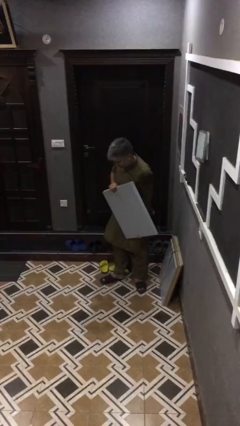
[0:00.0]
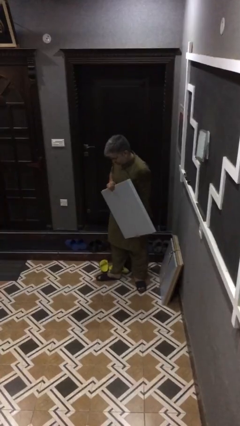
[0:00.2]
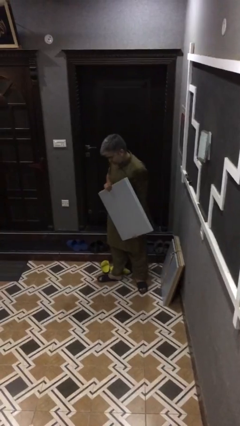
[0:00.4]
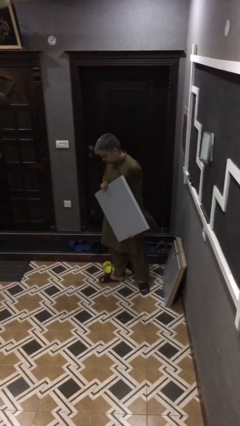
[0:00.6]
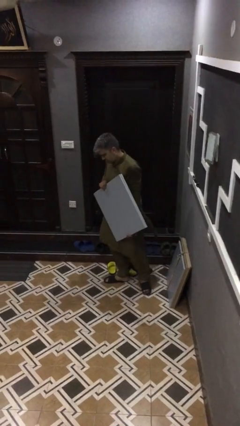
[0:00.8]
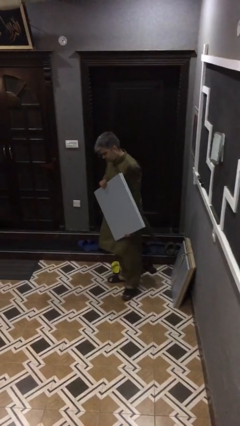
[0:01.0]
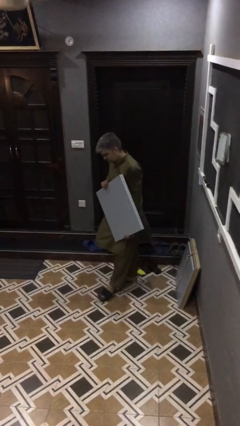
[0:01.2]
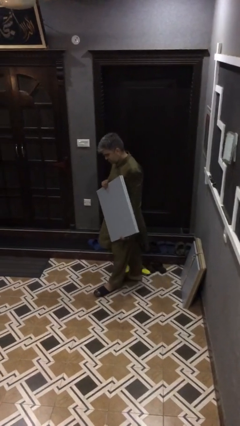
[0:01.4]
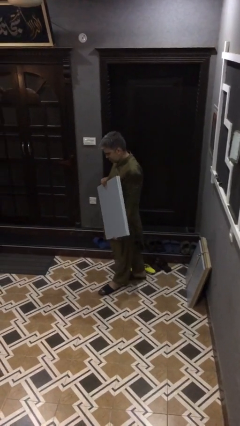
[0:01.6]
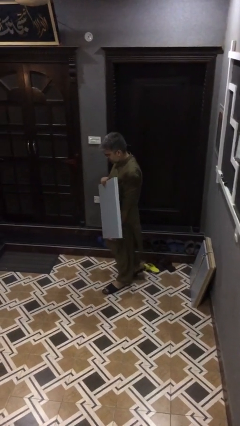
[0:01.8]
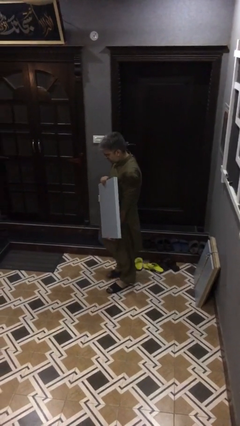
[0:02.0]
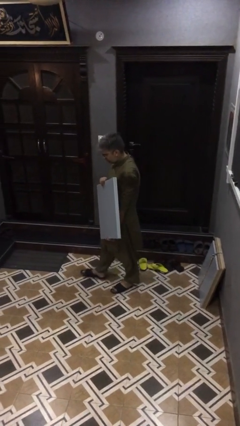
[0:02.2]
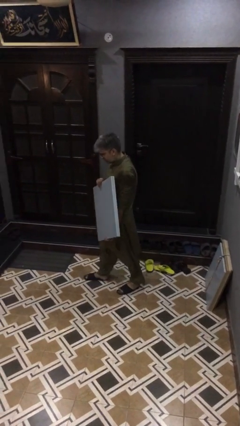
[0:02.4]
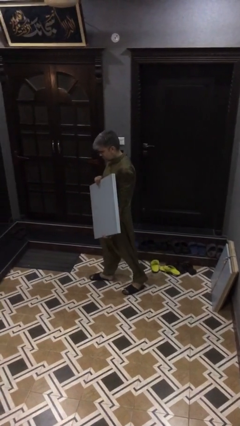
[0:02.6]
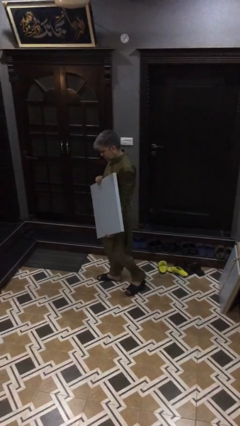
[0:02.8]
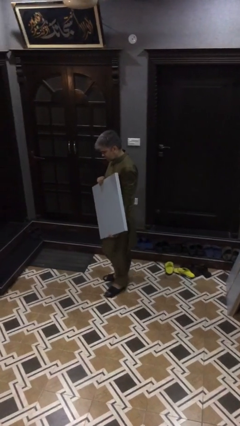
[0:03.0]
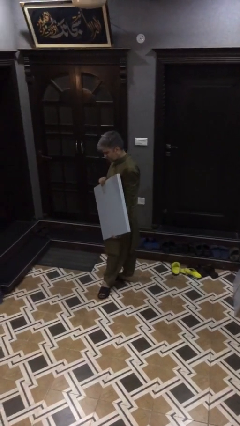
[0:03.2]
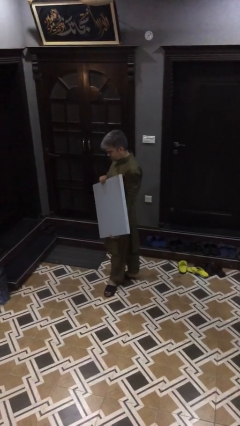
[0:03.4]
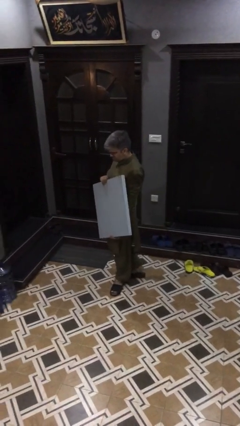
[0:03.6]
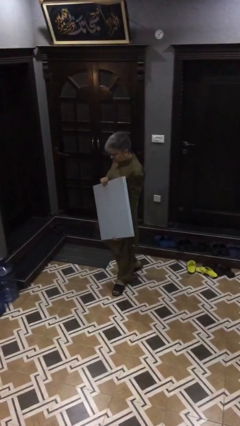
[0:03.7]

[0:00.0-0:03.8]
person carries heavy object

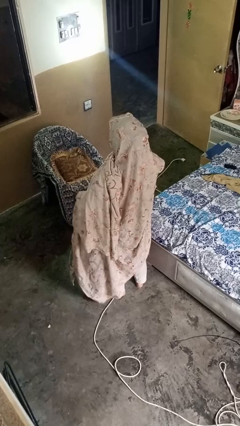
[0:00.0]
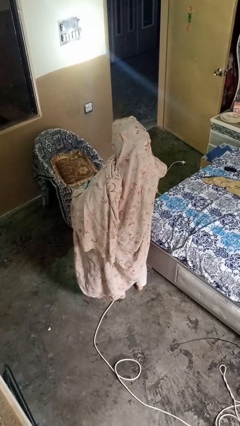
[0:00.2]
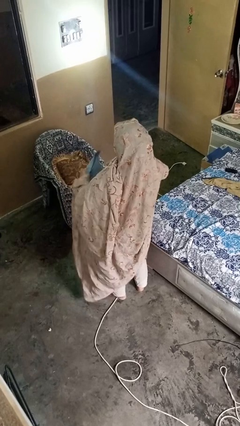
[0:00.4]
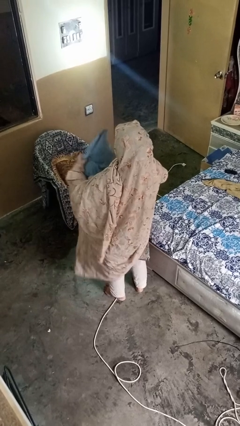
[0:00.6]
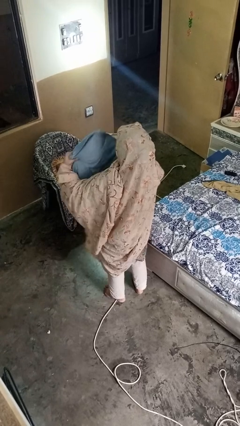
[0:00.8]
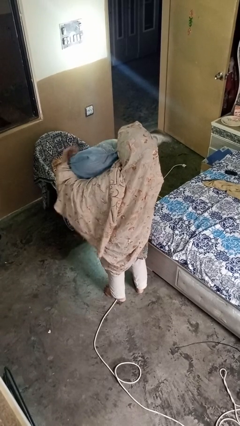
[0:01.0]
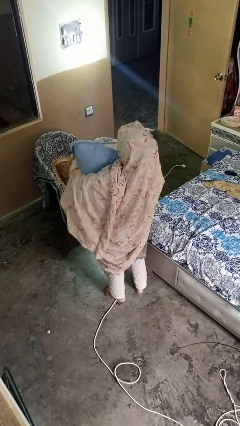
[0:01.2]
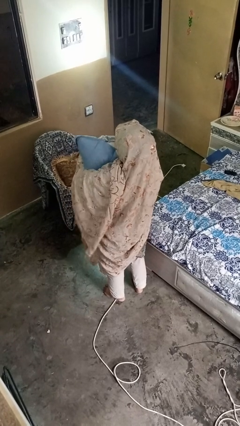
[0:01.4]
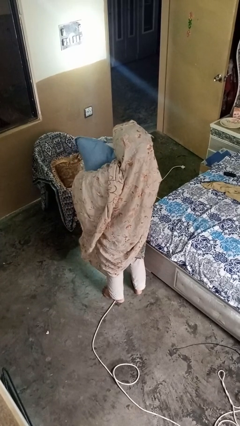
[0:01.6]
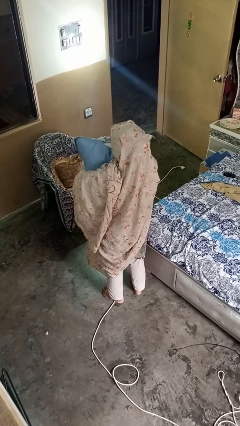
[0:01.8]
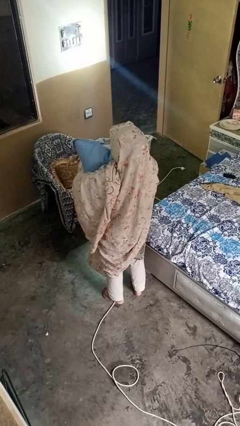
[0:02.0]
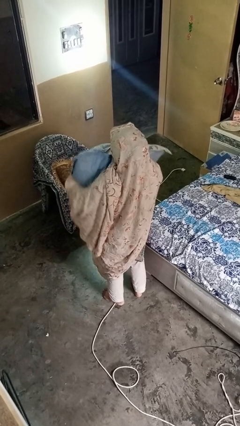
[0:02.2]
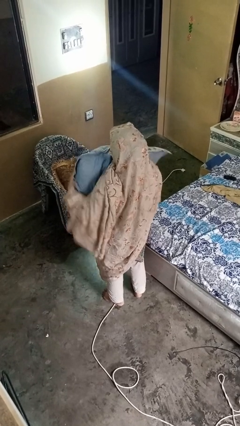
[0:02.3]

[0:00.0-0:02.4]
person squeezes object

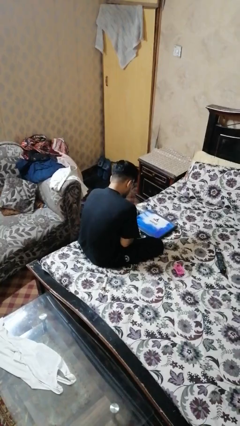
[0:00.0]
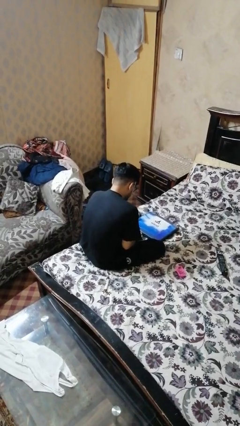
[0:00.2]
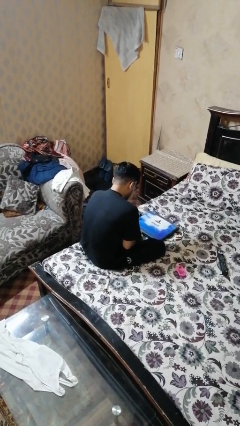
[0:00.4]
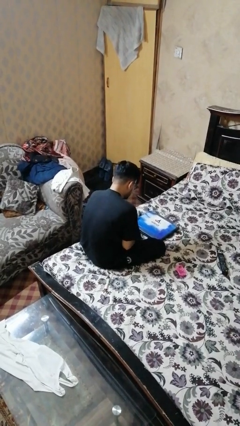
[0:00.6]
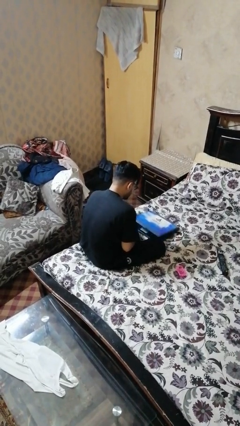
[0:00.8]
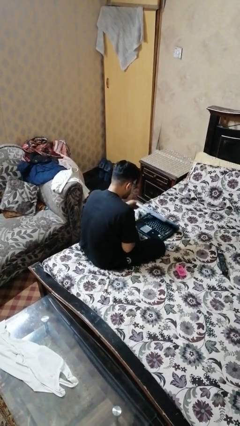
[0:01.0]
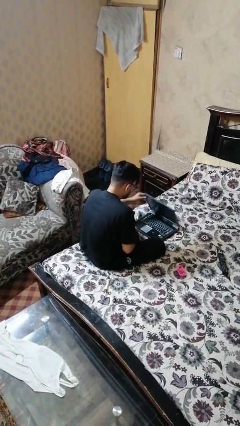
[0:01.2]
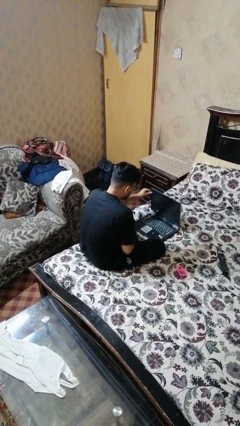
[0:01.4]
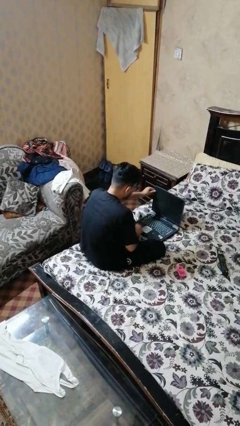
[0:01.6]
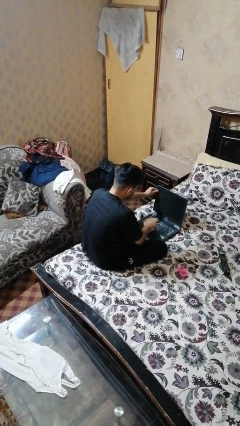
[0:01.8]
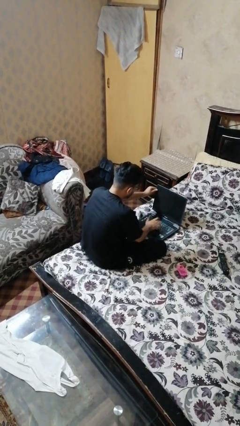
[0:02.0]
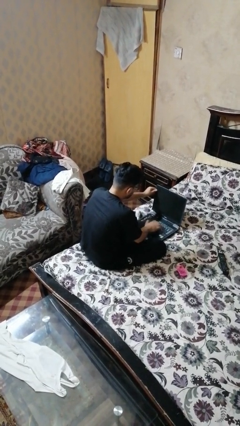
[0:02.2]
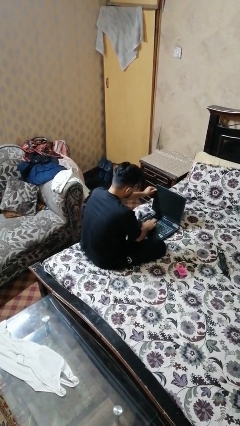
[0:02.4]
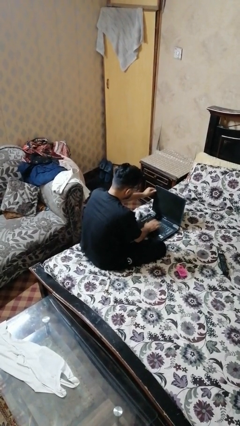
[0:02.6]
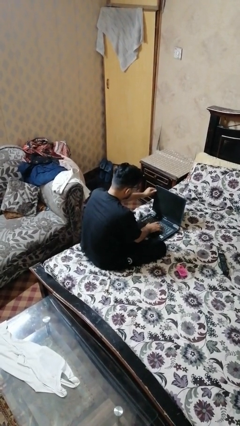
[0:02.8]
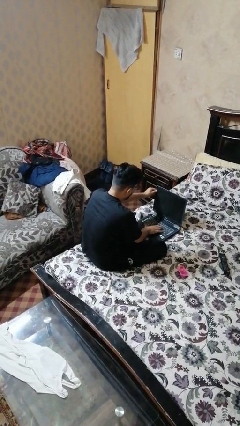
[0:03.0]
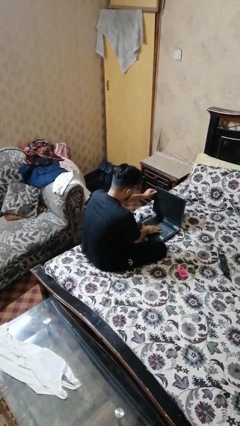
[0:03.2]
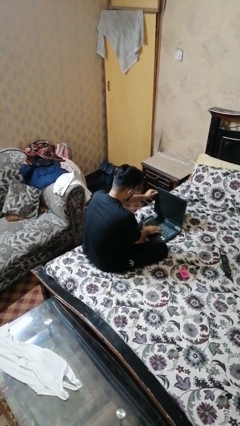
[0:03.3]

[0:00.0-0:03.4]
person opens laptop

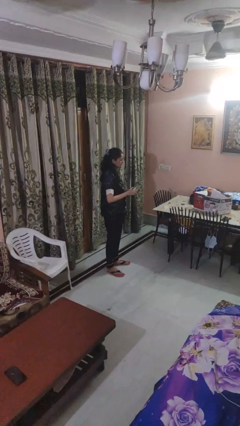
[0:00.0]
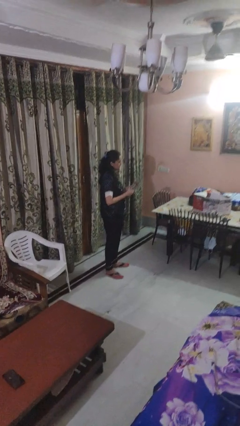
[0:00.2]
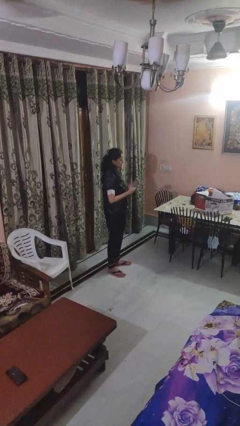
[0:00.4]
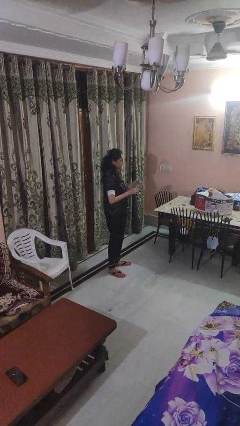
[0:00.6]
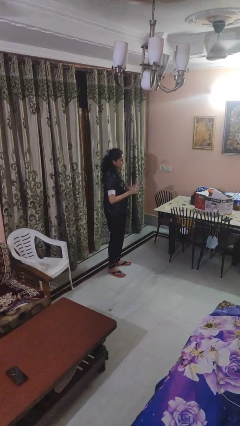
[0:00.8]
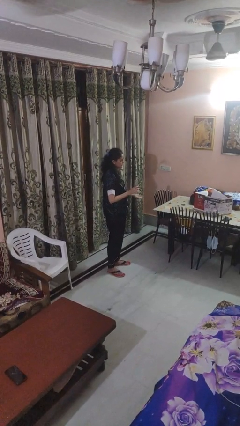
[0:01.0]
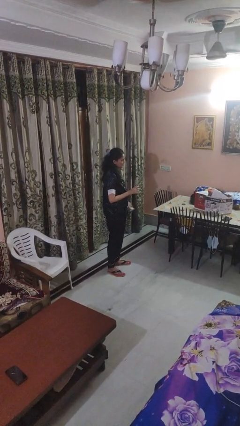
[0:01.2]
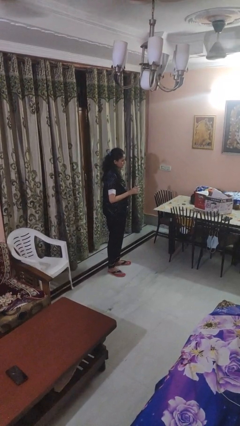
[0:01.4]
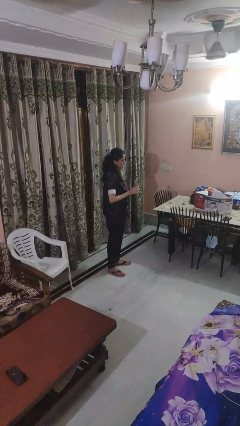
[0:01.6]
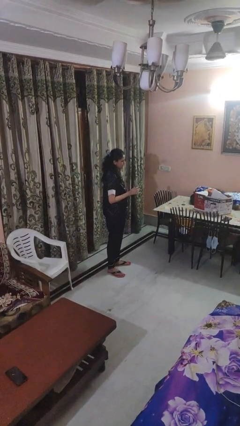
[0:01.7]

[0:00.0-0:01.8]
person unscrews lid from bottle

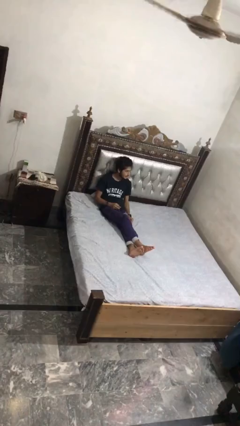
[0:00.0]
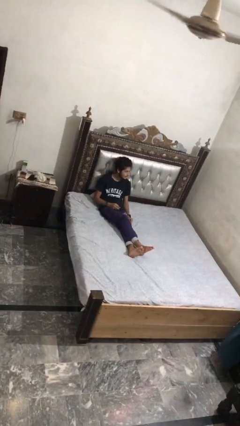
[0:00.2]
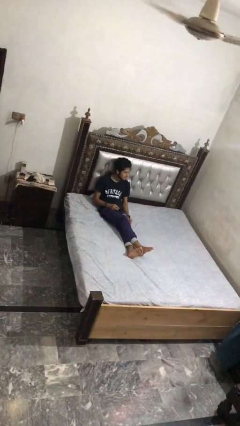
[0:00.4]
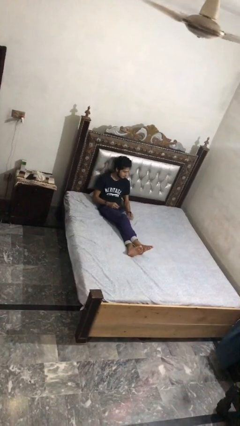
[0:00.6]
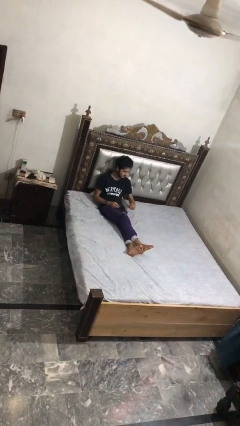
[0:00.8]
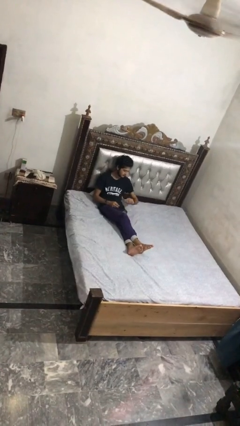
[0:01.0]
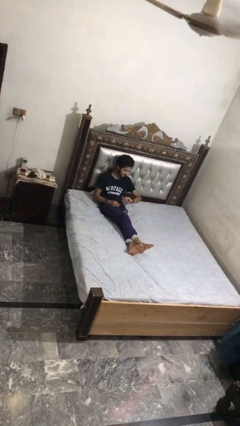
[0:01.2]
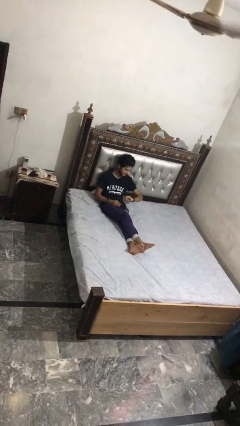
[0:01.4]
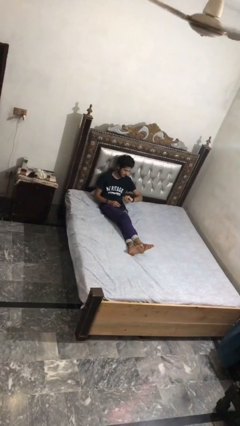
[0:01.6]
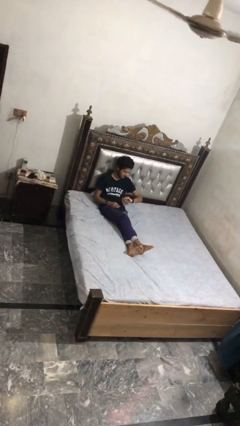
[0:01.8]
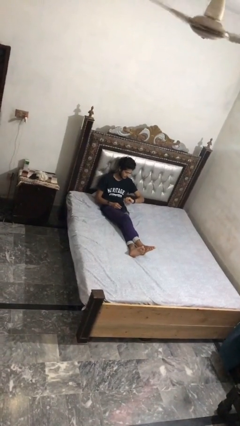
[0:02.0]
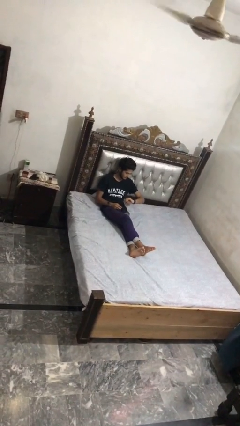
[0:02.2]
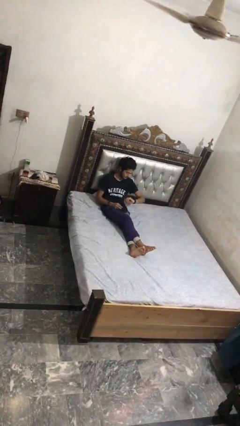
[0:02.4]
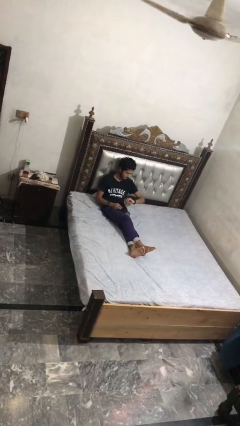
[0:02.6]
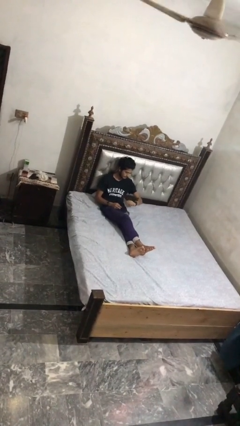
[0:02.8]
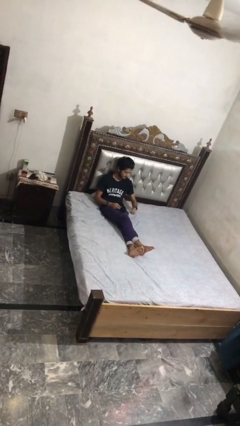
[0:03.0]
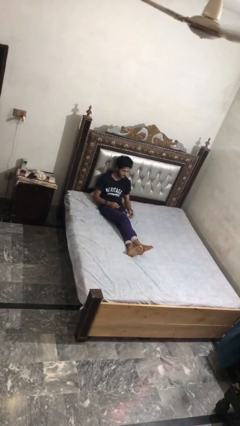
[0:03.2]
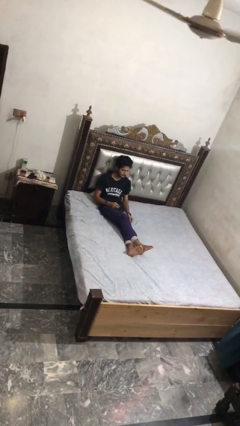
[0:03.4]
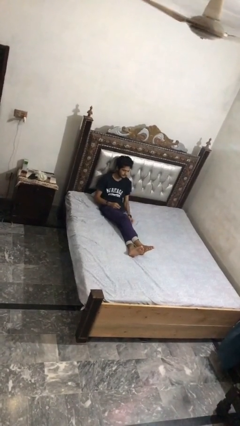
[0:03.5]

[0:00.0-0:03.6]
person looks at wristwatch

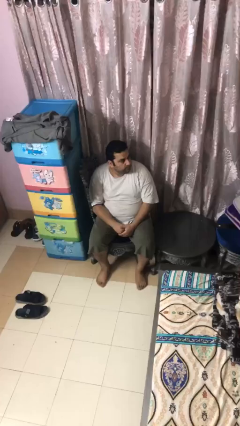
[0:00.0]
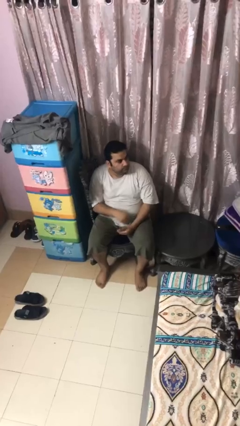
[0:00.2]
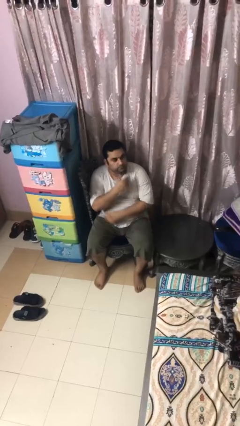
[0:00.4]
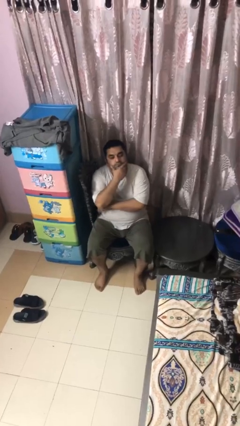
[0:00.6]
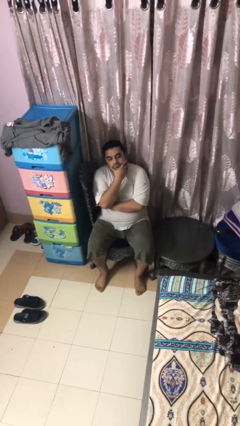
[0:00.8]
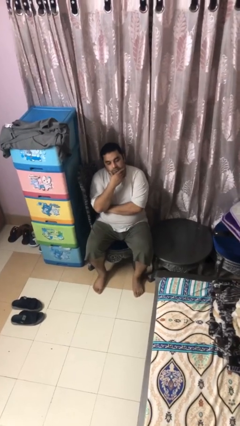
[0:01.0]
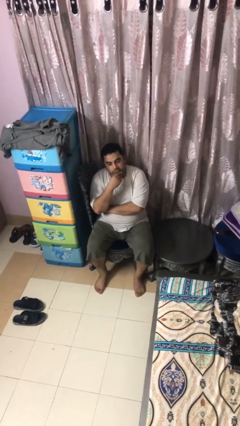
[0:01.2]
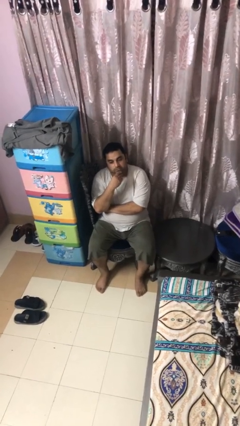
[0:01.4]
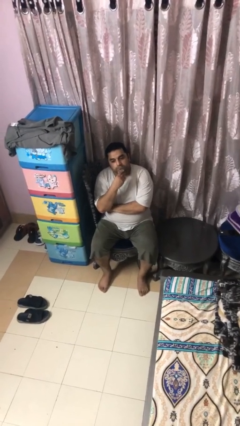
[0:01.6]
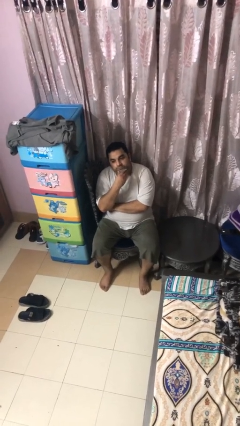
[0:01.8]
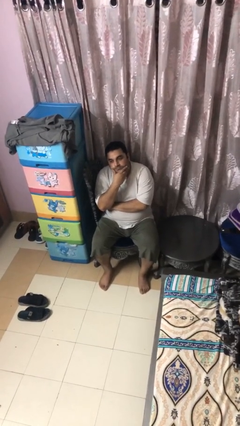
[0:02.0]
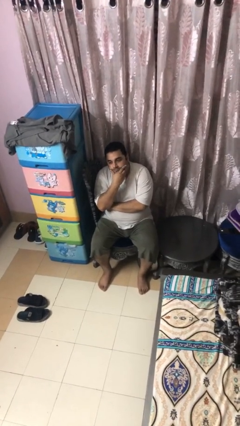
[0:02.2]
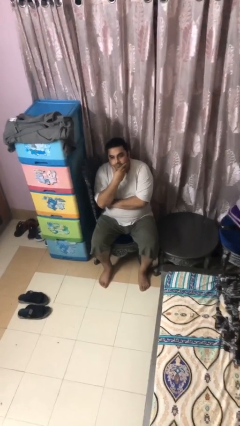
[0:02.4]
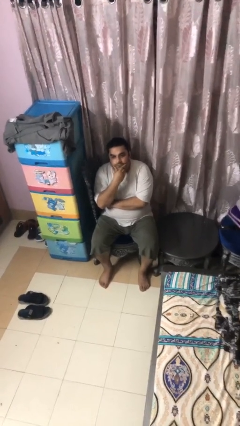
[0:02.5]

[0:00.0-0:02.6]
person strokes chin
